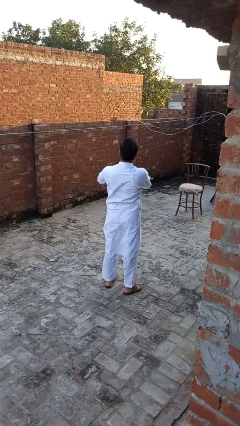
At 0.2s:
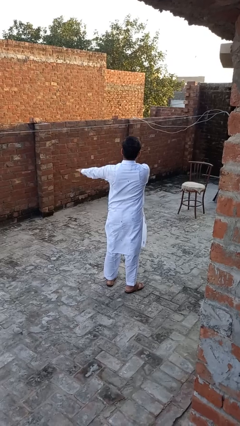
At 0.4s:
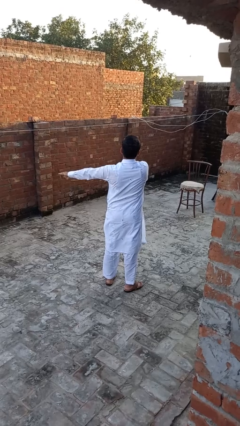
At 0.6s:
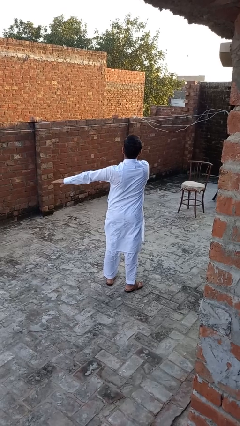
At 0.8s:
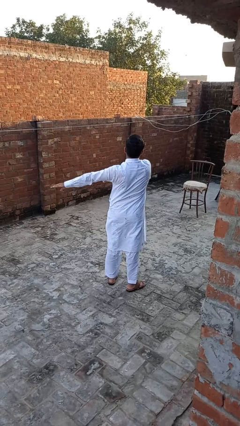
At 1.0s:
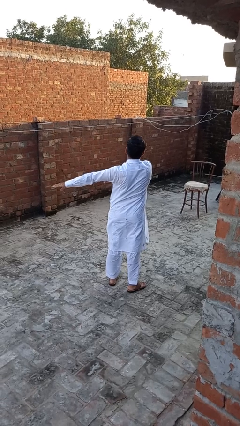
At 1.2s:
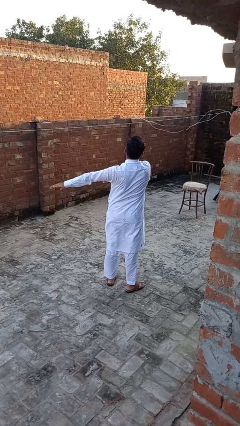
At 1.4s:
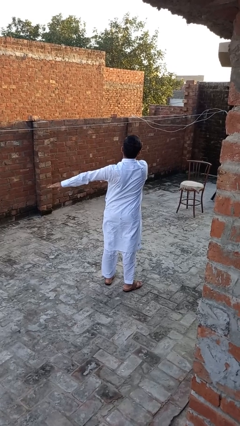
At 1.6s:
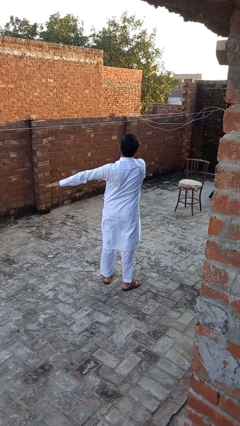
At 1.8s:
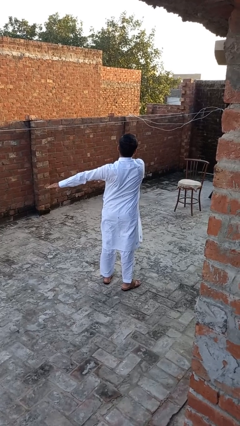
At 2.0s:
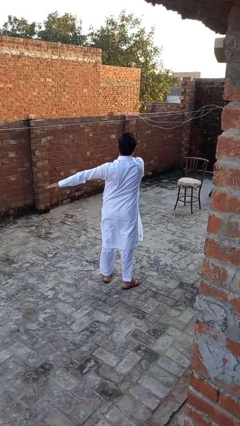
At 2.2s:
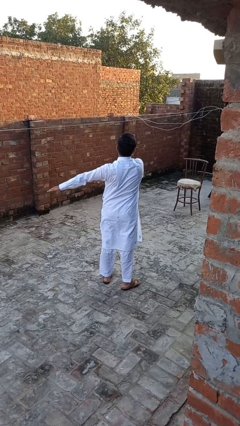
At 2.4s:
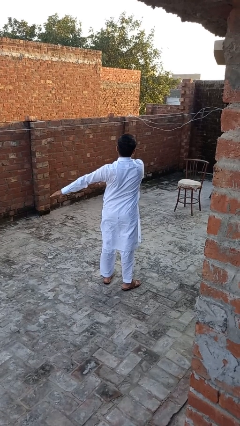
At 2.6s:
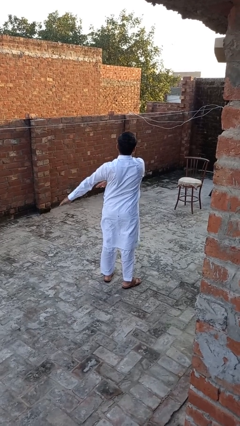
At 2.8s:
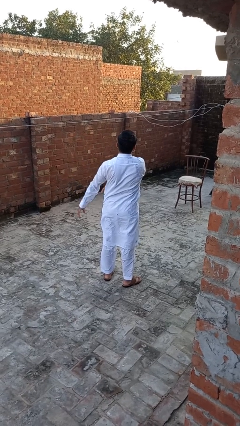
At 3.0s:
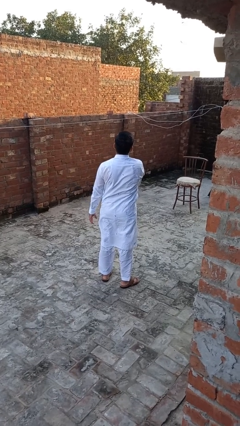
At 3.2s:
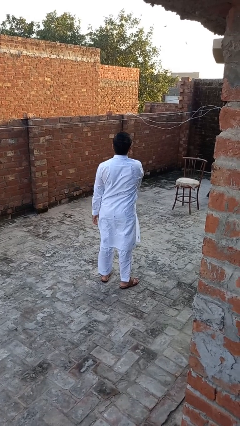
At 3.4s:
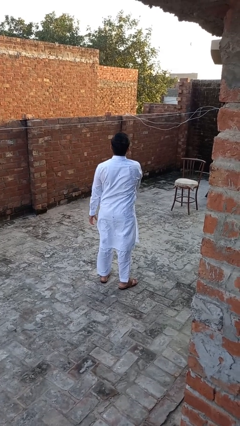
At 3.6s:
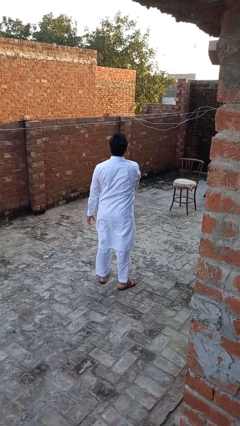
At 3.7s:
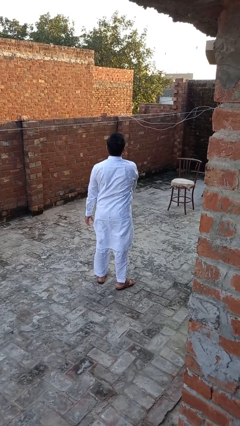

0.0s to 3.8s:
person gestures swipe left

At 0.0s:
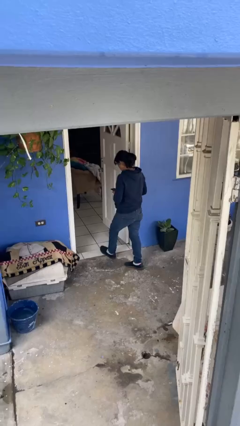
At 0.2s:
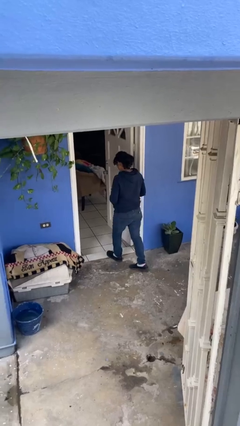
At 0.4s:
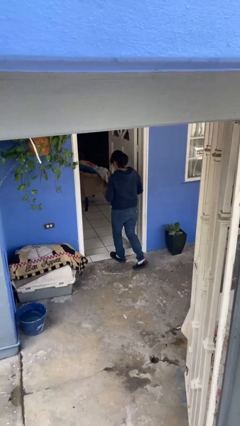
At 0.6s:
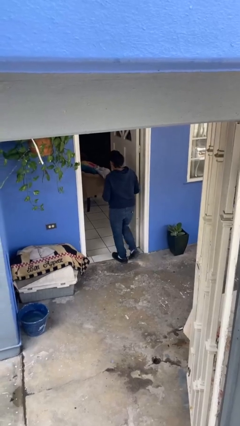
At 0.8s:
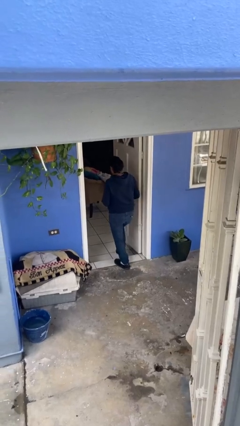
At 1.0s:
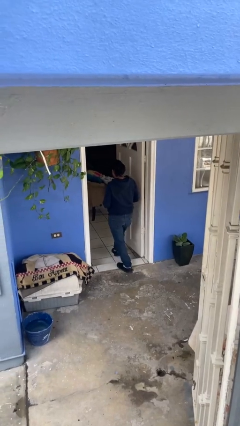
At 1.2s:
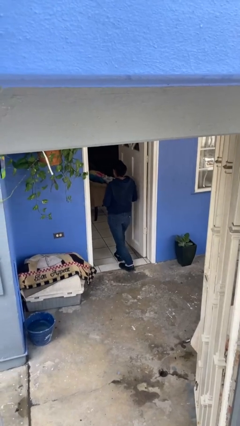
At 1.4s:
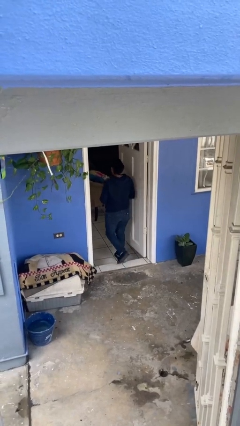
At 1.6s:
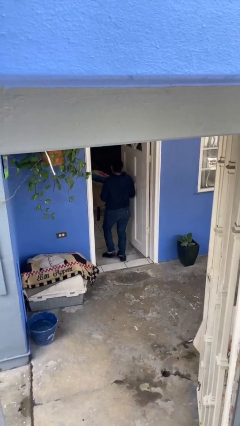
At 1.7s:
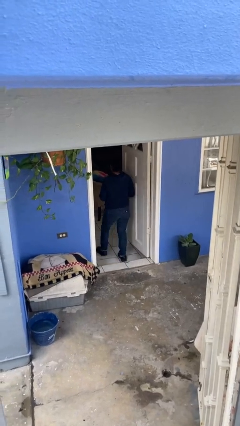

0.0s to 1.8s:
person exits scene through structure

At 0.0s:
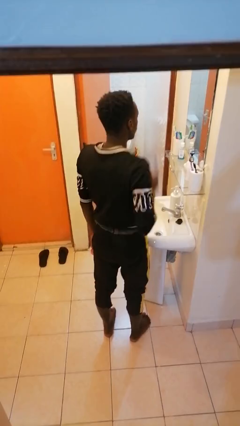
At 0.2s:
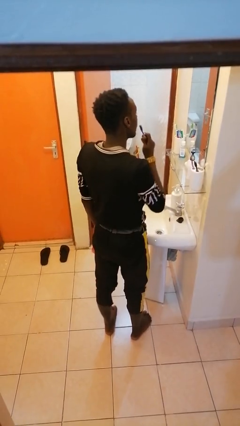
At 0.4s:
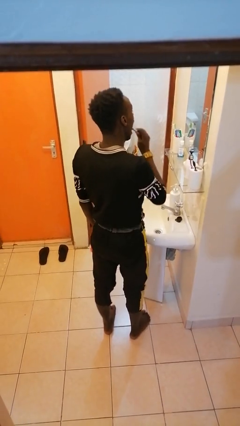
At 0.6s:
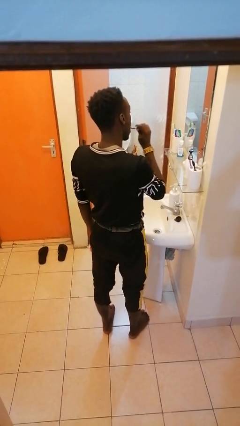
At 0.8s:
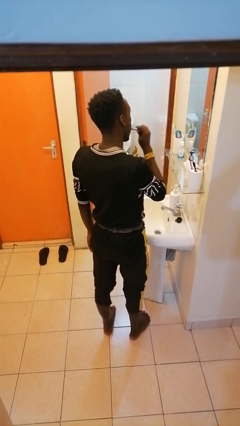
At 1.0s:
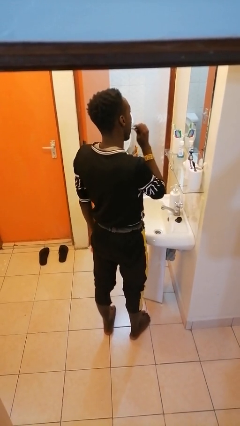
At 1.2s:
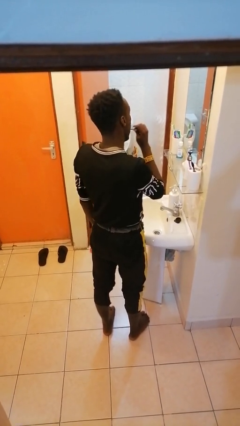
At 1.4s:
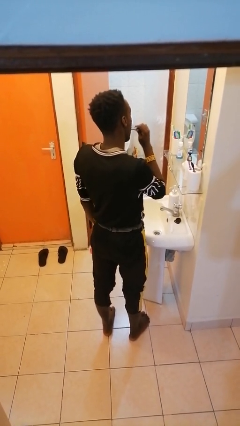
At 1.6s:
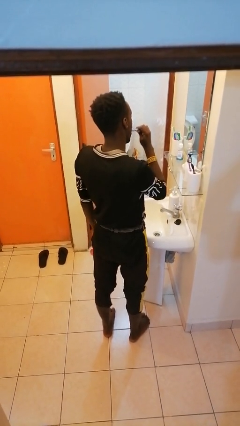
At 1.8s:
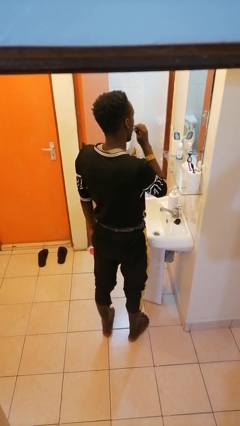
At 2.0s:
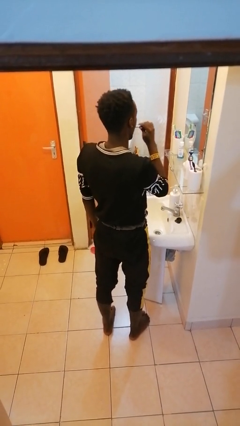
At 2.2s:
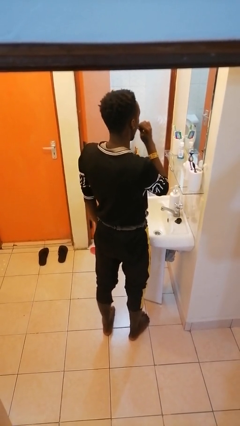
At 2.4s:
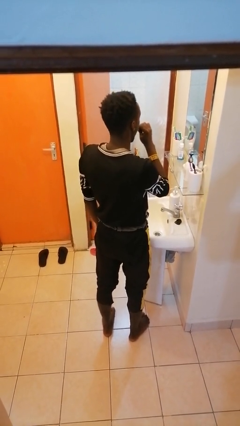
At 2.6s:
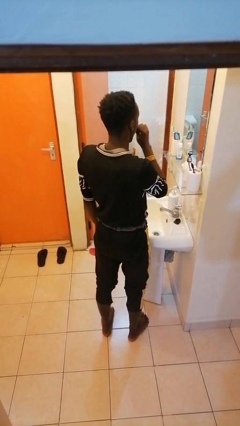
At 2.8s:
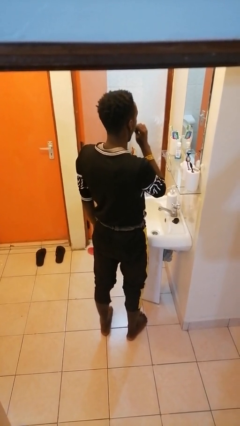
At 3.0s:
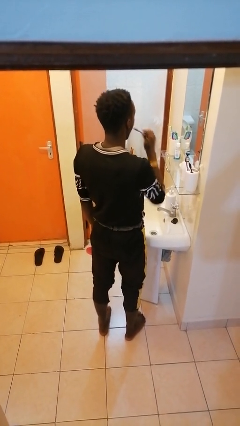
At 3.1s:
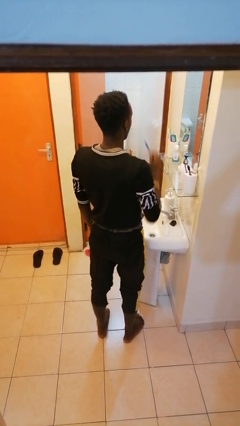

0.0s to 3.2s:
person brushes teeth

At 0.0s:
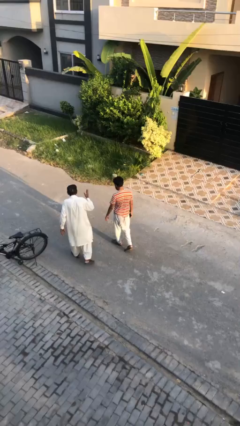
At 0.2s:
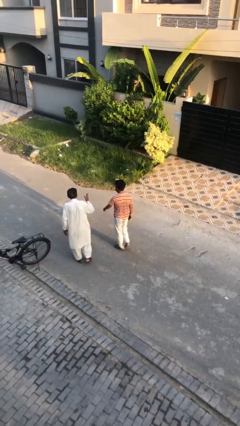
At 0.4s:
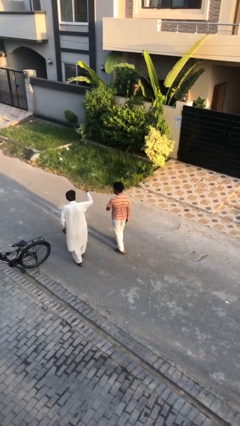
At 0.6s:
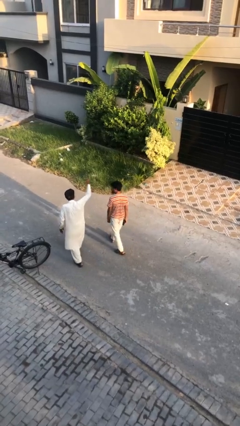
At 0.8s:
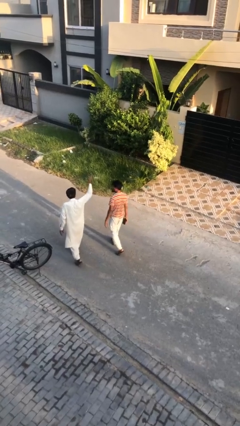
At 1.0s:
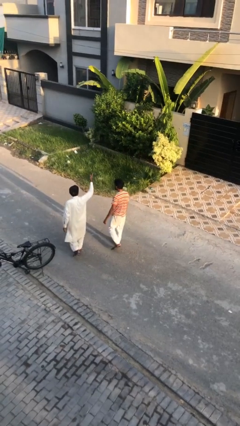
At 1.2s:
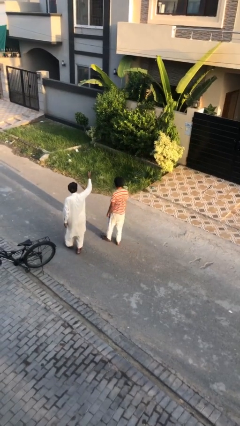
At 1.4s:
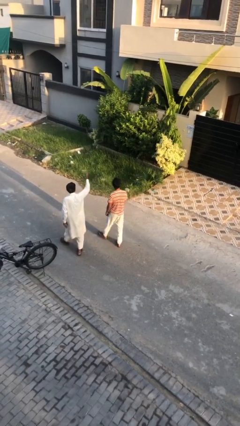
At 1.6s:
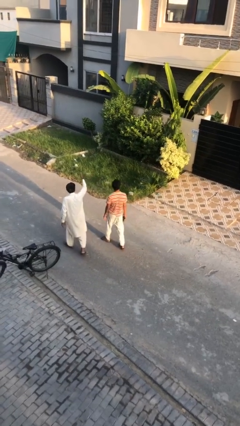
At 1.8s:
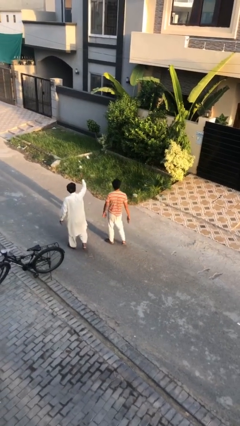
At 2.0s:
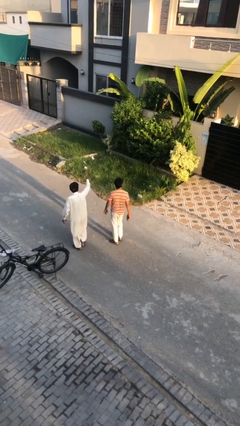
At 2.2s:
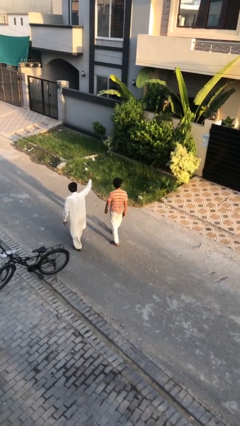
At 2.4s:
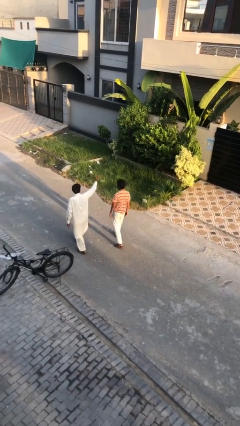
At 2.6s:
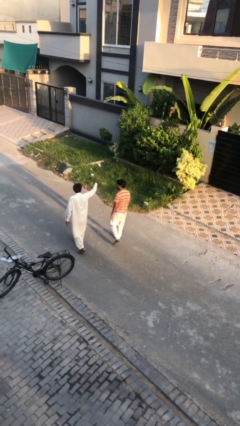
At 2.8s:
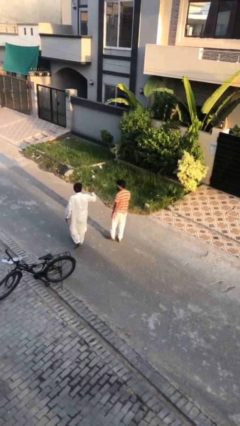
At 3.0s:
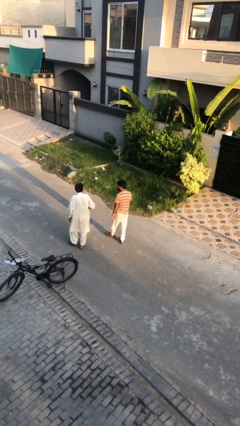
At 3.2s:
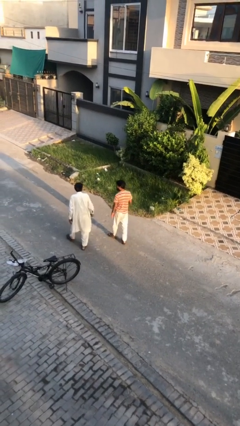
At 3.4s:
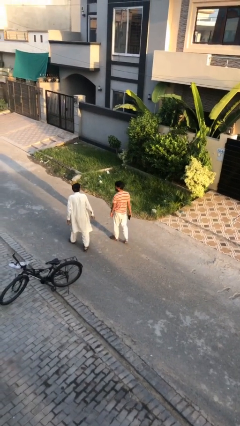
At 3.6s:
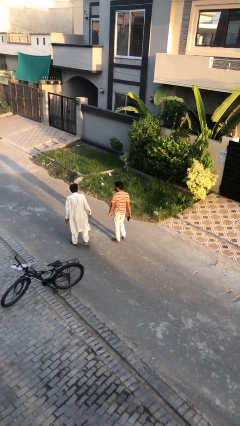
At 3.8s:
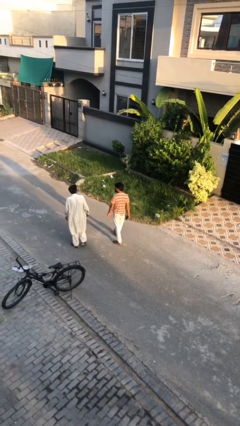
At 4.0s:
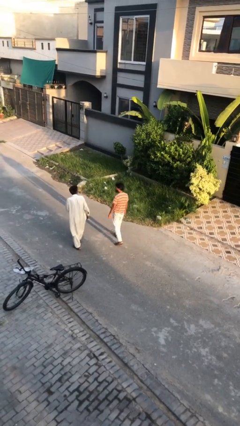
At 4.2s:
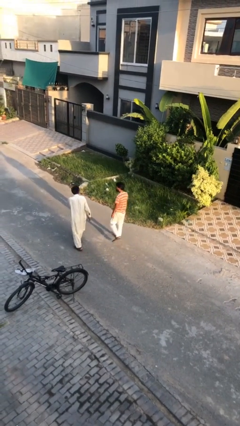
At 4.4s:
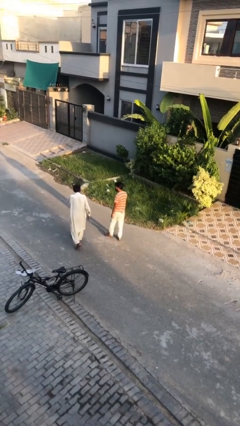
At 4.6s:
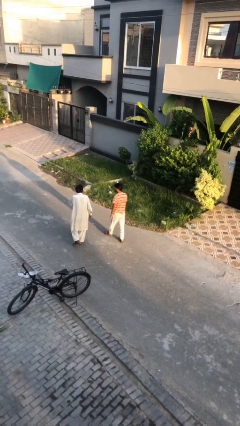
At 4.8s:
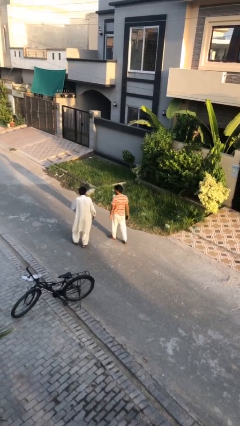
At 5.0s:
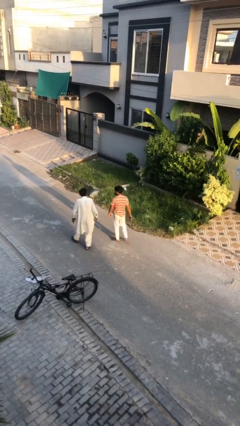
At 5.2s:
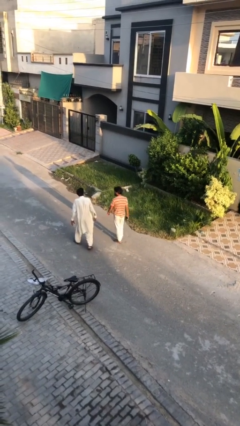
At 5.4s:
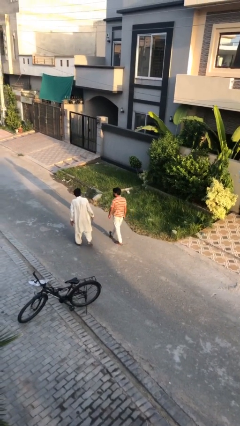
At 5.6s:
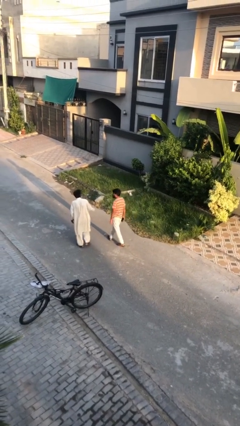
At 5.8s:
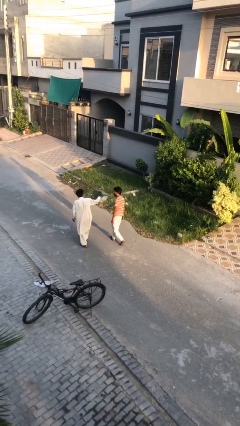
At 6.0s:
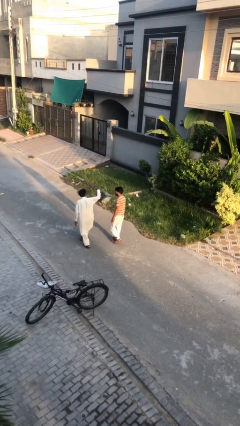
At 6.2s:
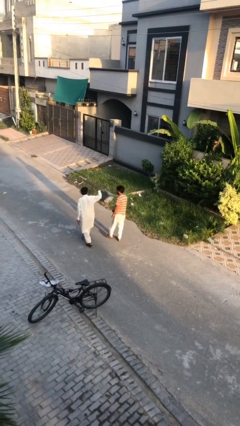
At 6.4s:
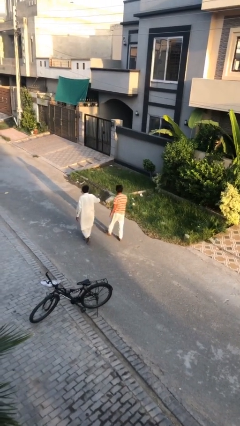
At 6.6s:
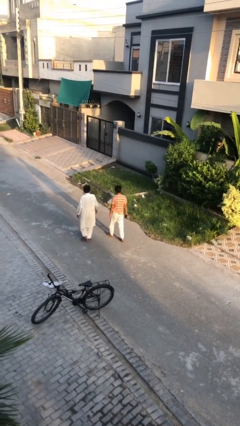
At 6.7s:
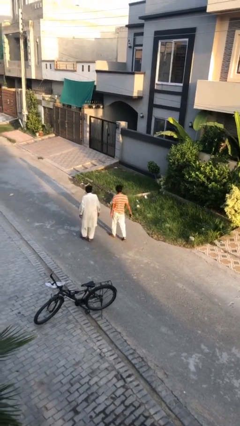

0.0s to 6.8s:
person talks to person

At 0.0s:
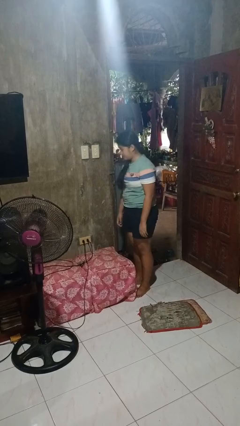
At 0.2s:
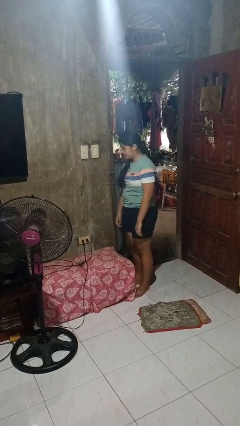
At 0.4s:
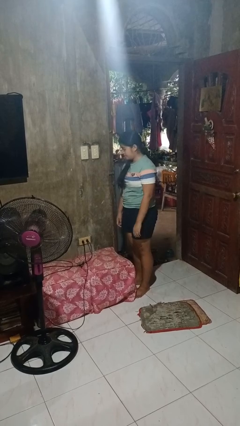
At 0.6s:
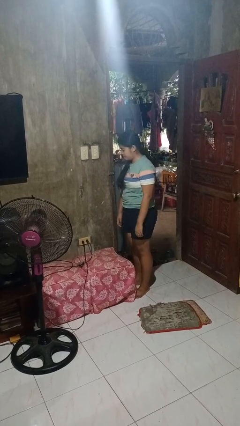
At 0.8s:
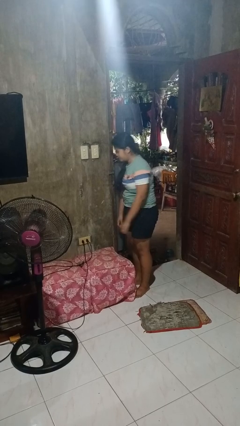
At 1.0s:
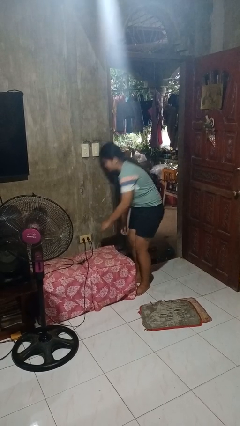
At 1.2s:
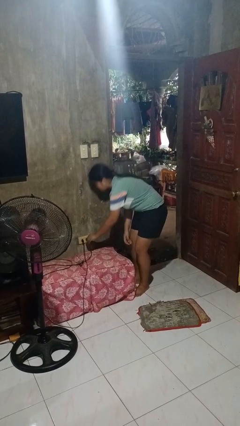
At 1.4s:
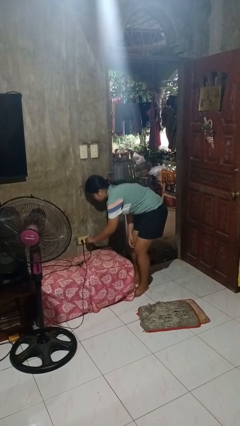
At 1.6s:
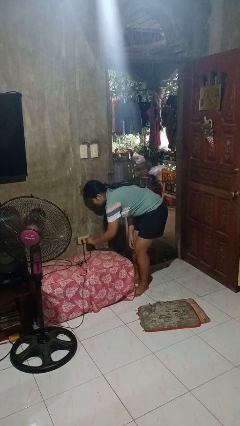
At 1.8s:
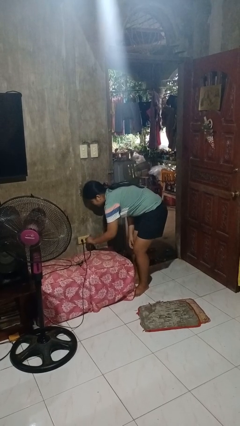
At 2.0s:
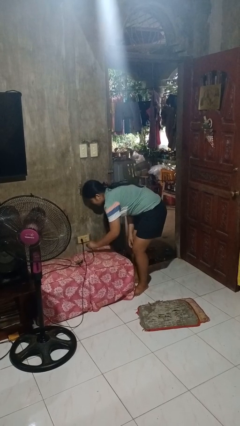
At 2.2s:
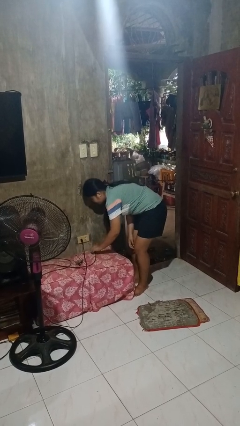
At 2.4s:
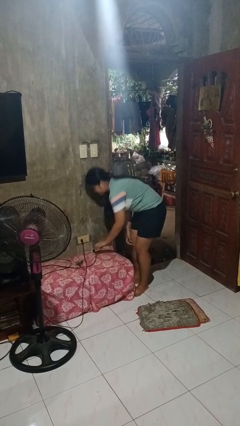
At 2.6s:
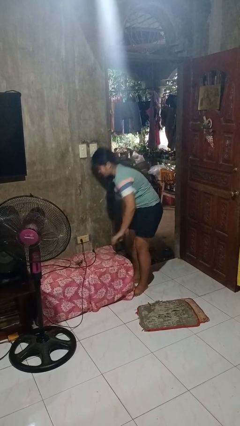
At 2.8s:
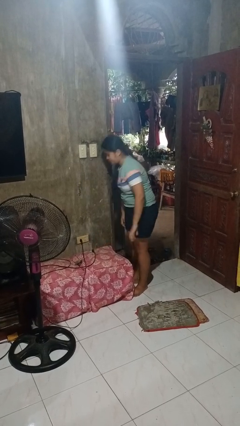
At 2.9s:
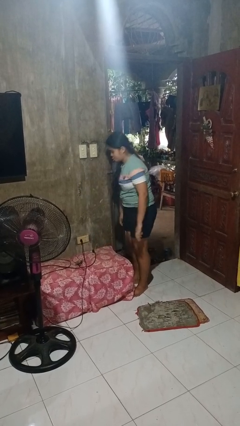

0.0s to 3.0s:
person unplugs from electrical socket
